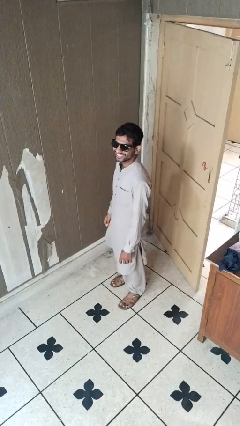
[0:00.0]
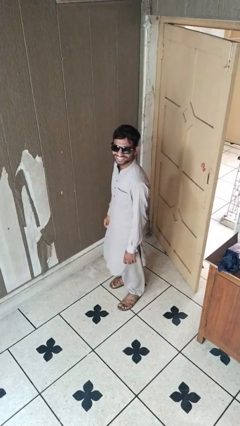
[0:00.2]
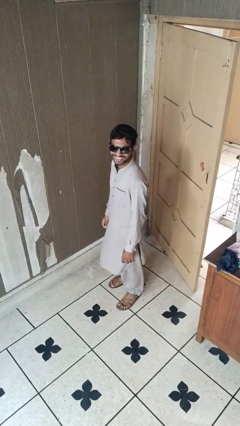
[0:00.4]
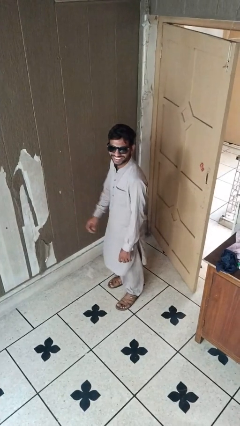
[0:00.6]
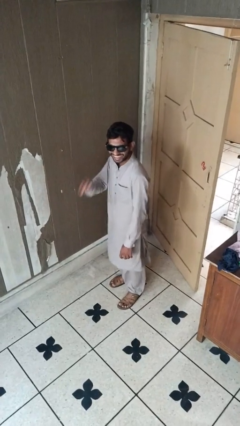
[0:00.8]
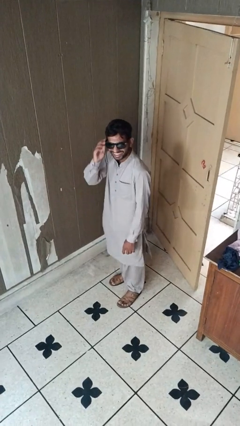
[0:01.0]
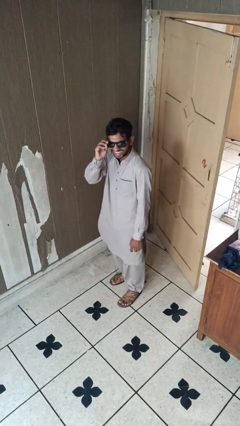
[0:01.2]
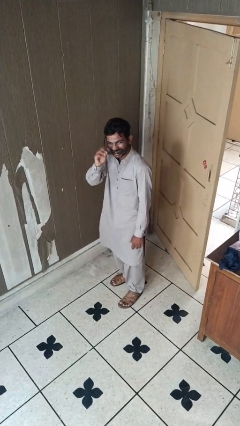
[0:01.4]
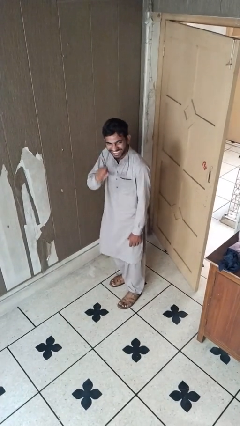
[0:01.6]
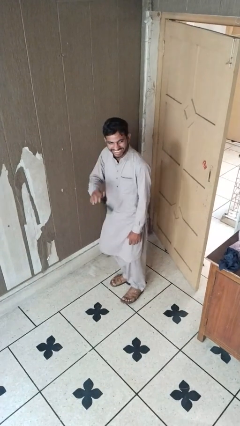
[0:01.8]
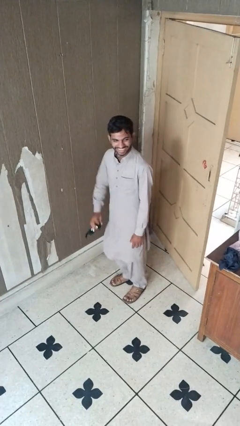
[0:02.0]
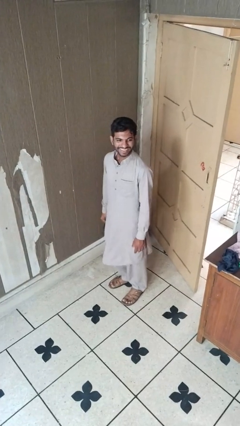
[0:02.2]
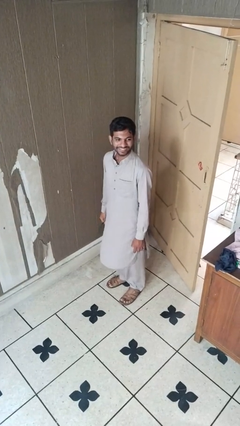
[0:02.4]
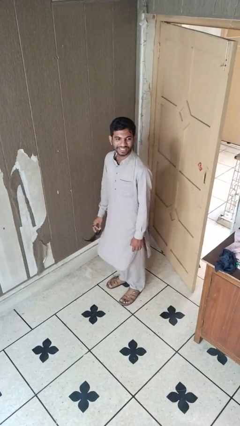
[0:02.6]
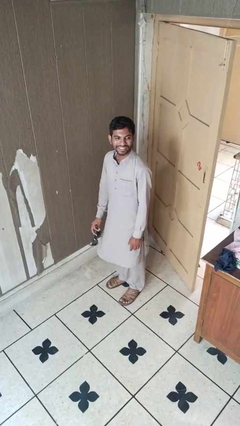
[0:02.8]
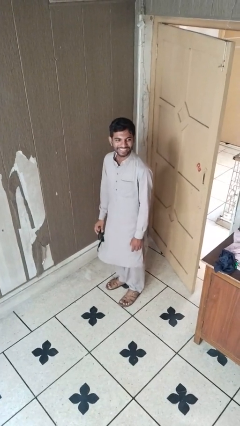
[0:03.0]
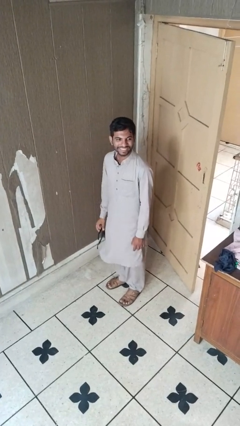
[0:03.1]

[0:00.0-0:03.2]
person takes off sunglasses

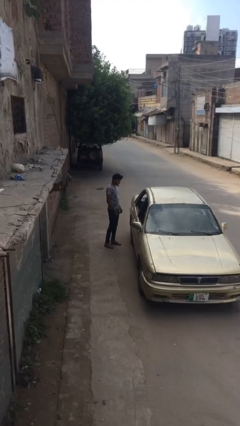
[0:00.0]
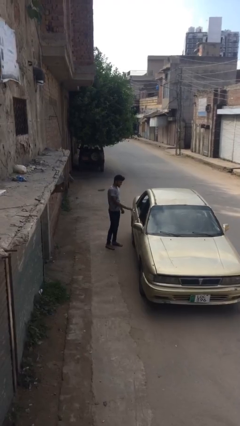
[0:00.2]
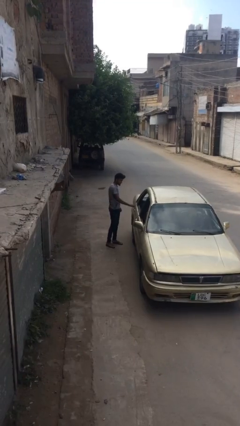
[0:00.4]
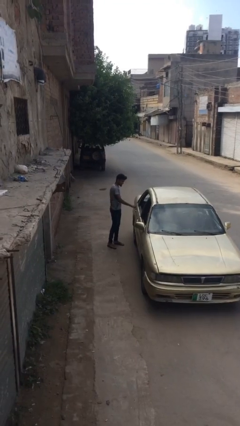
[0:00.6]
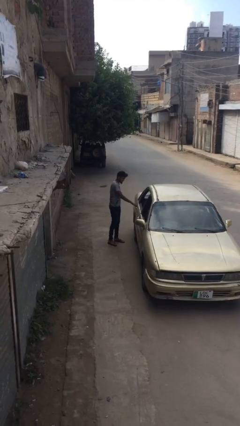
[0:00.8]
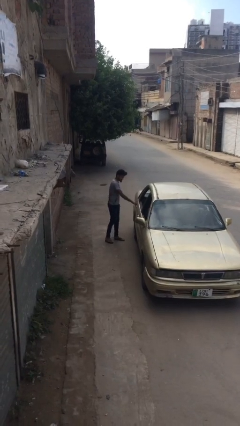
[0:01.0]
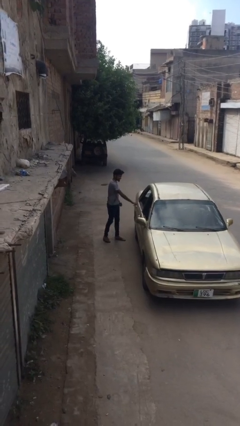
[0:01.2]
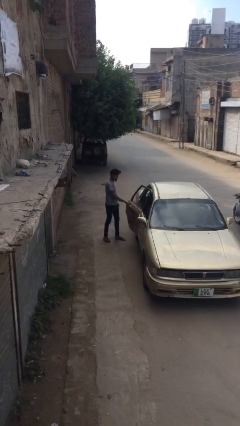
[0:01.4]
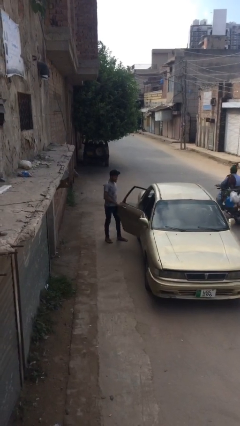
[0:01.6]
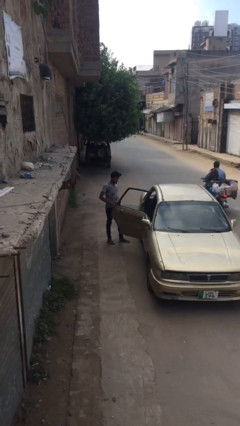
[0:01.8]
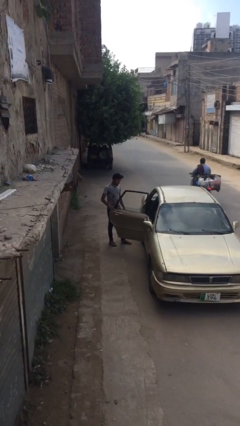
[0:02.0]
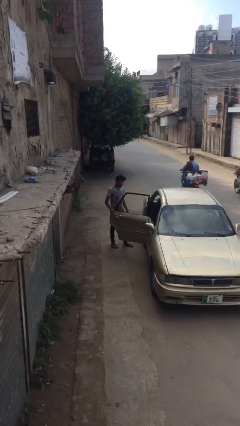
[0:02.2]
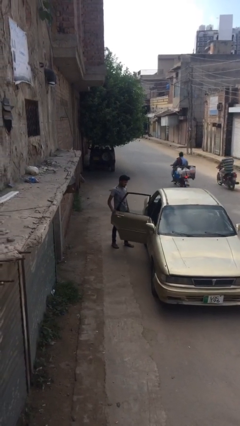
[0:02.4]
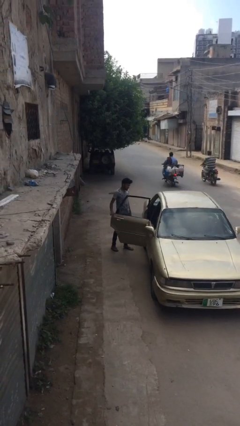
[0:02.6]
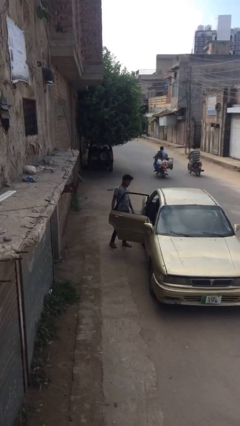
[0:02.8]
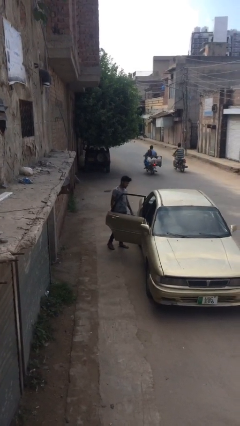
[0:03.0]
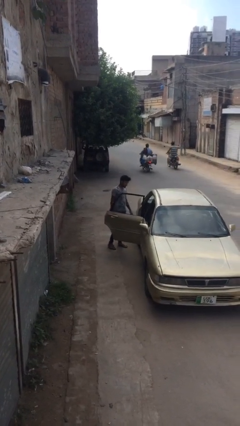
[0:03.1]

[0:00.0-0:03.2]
person opens car door

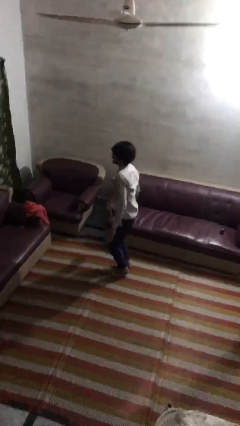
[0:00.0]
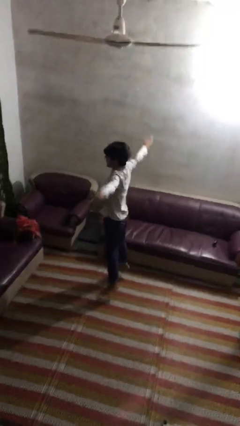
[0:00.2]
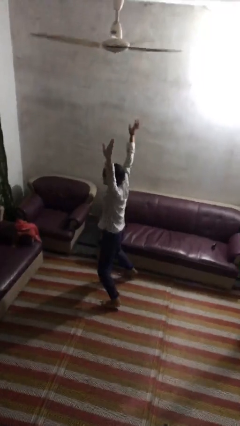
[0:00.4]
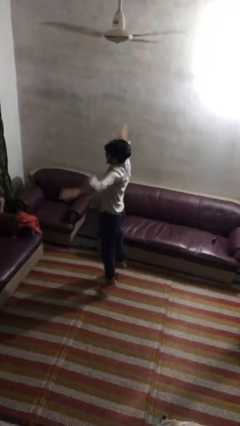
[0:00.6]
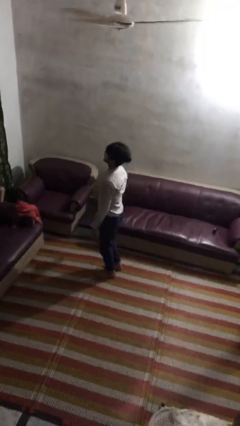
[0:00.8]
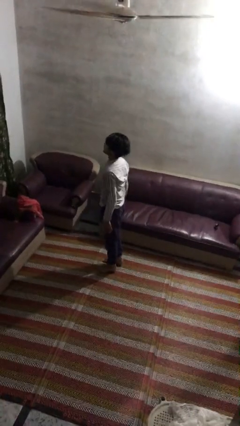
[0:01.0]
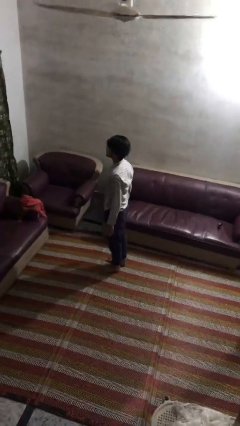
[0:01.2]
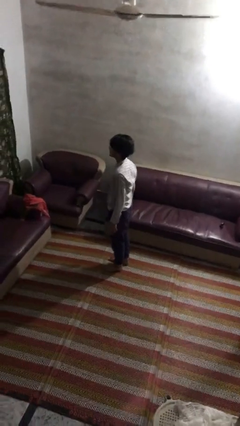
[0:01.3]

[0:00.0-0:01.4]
person exercises with jumping jacks

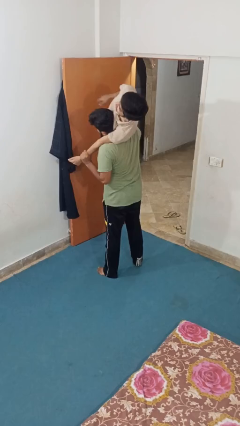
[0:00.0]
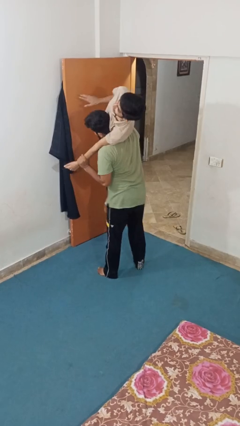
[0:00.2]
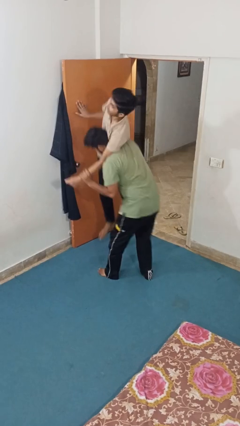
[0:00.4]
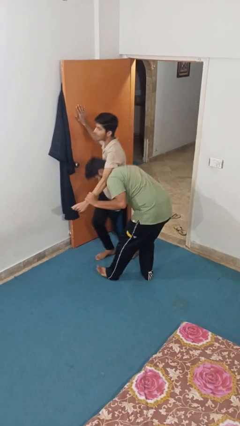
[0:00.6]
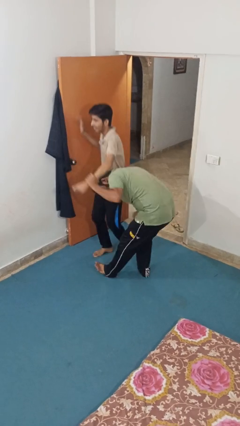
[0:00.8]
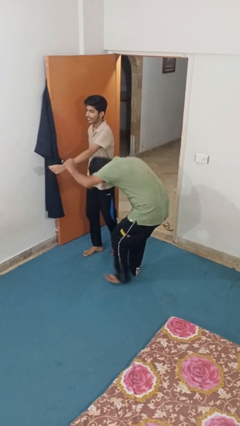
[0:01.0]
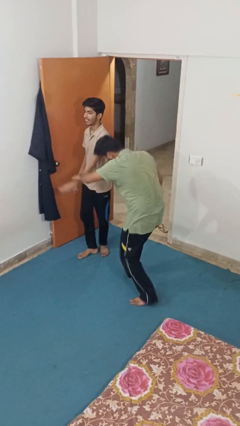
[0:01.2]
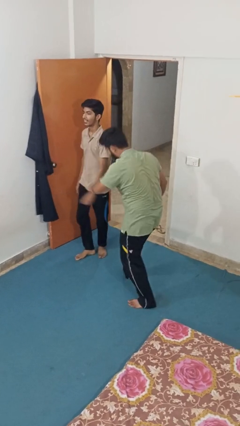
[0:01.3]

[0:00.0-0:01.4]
person puts down person

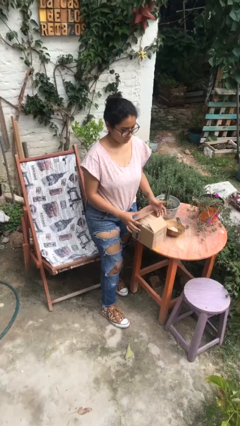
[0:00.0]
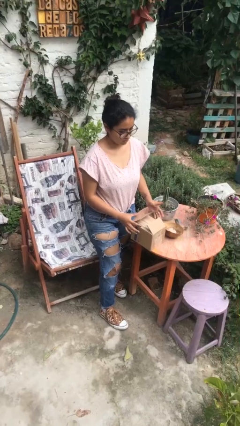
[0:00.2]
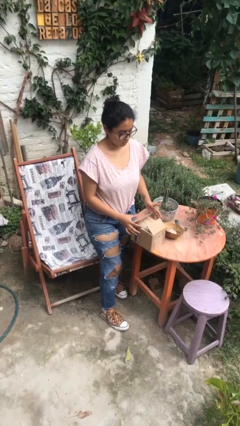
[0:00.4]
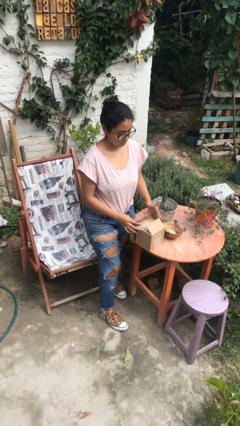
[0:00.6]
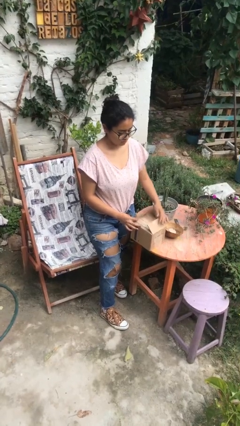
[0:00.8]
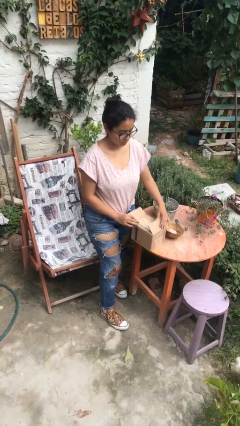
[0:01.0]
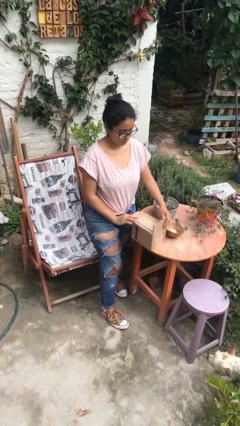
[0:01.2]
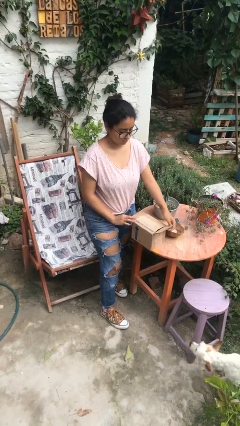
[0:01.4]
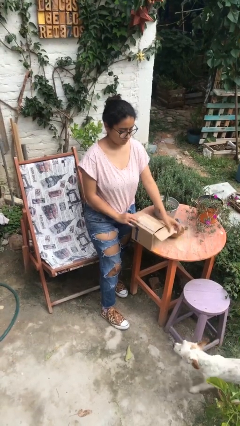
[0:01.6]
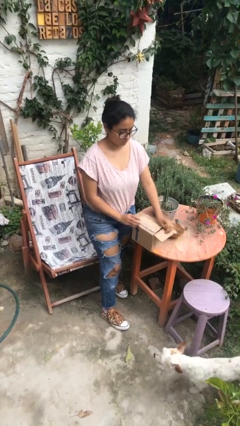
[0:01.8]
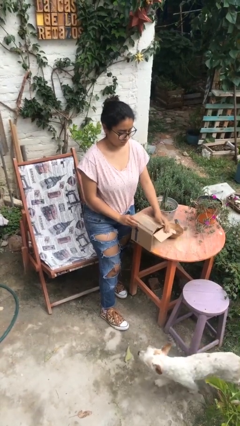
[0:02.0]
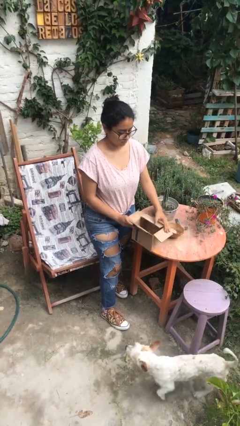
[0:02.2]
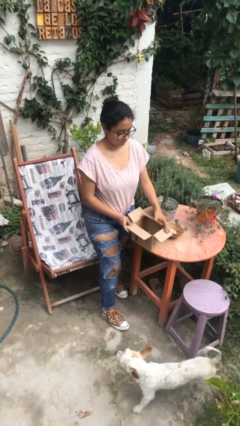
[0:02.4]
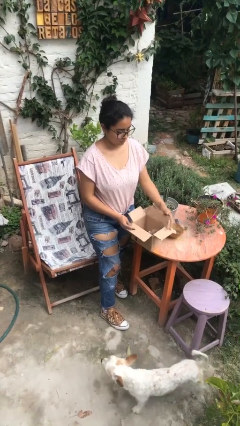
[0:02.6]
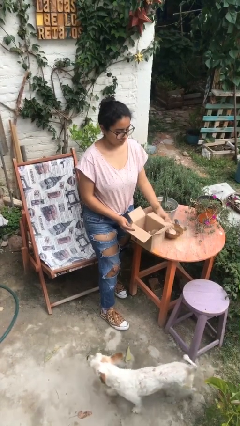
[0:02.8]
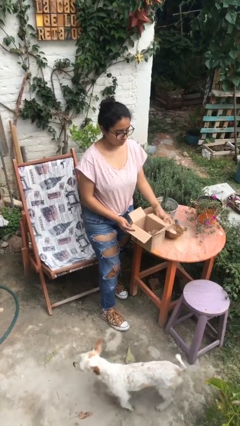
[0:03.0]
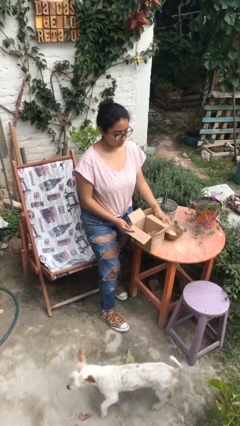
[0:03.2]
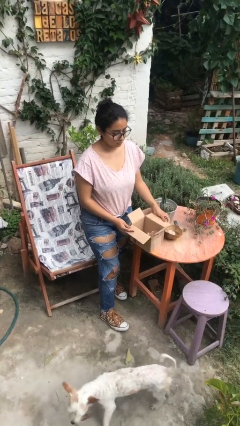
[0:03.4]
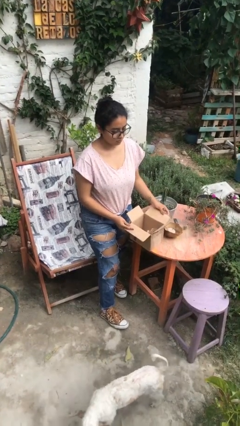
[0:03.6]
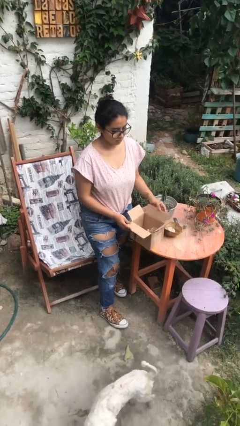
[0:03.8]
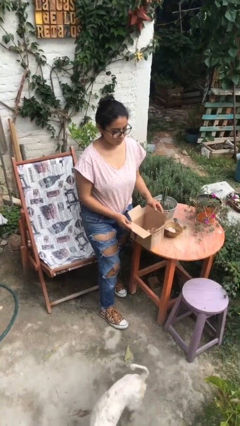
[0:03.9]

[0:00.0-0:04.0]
person opens box

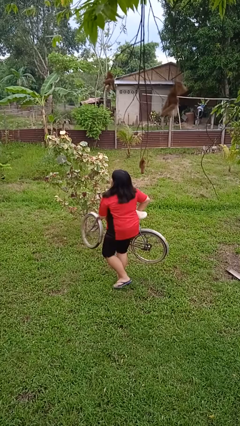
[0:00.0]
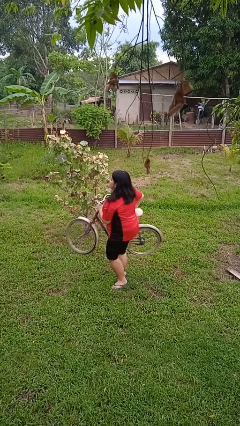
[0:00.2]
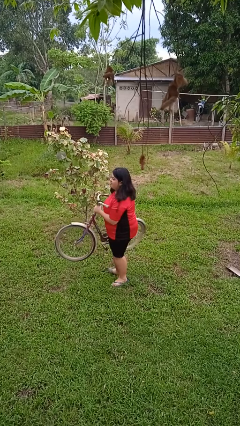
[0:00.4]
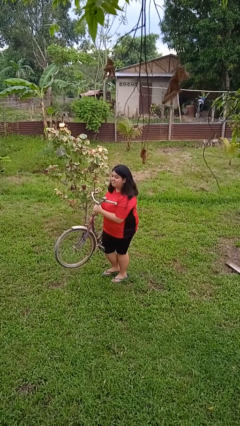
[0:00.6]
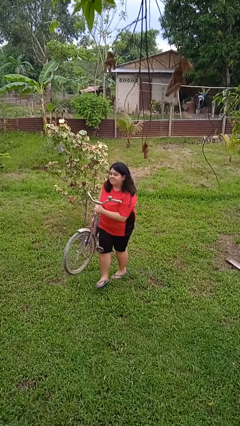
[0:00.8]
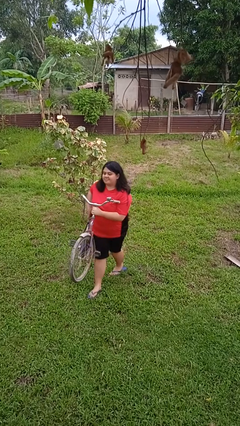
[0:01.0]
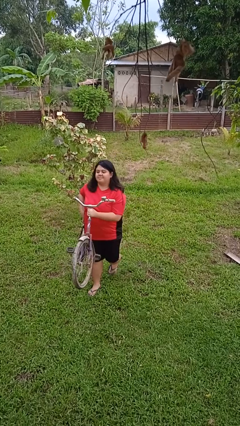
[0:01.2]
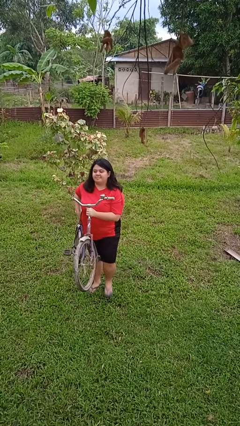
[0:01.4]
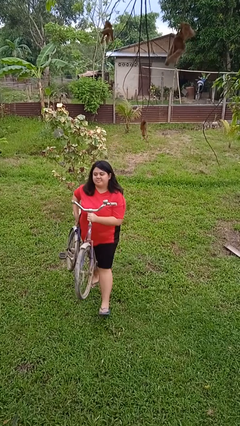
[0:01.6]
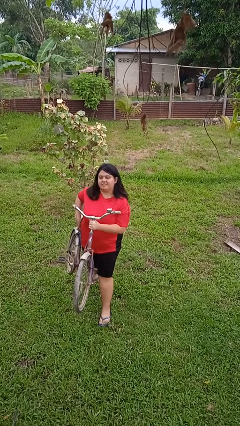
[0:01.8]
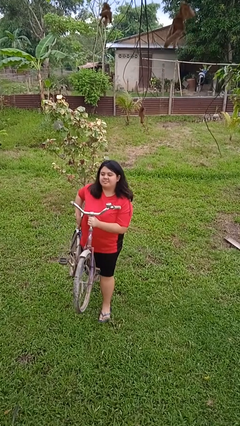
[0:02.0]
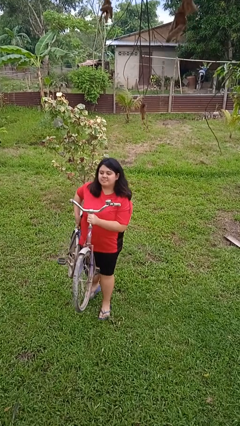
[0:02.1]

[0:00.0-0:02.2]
person carries bicycle

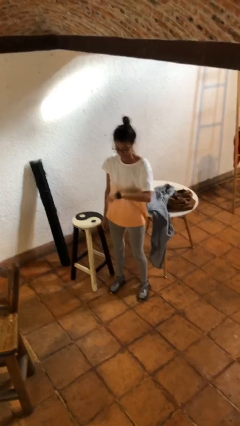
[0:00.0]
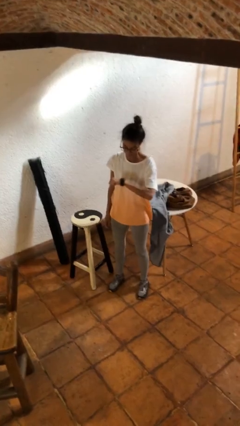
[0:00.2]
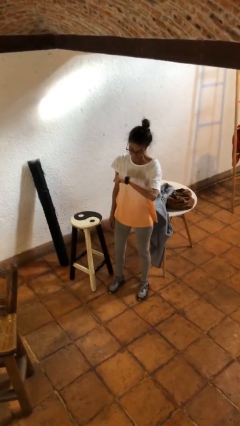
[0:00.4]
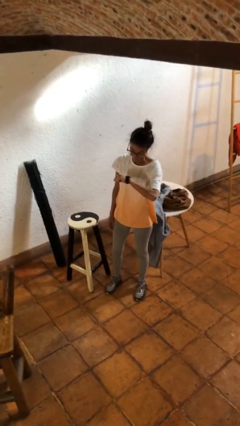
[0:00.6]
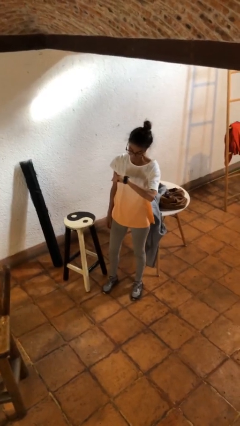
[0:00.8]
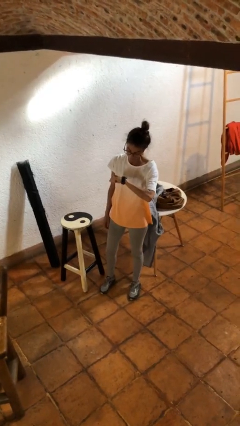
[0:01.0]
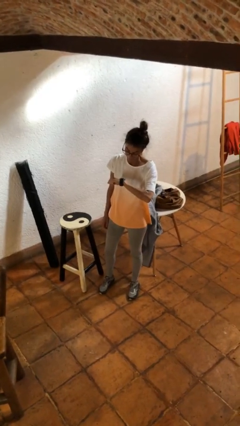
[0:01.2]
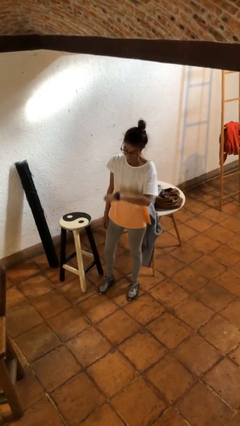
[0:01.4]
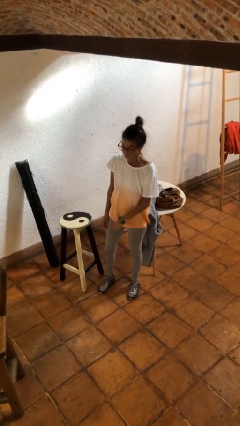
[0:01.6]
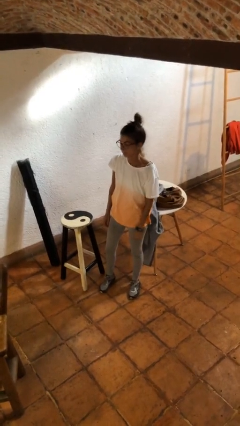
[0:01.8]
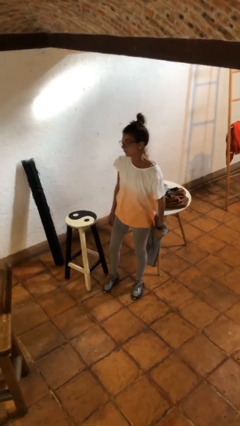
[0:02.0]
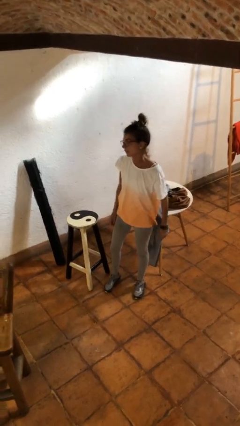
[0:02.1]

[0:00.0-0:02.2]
person looks at wristwatch
